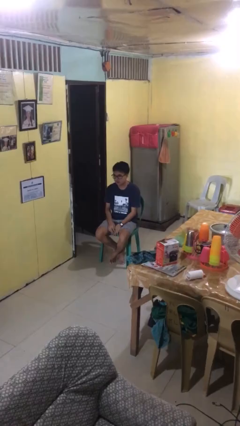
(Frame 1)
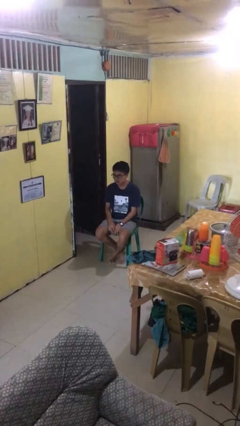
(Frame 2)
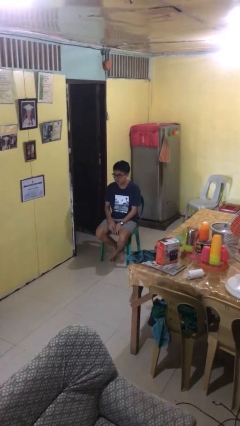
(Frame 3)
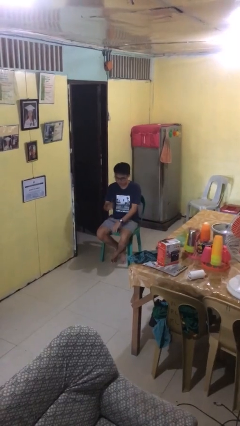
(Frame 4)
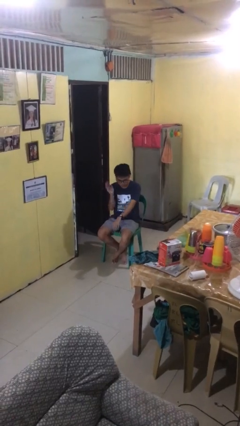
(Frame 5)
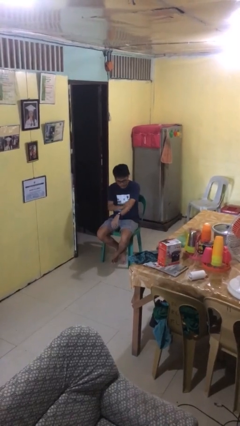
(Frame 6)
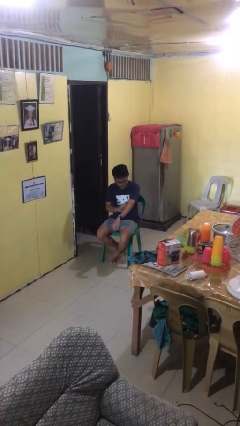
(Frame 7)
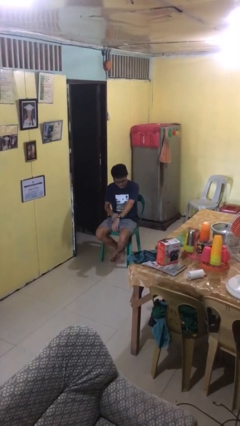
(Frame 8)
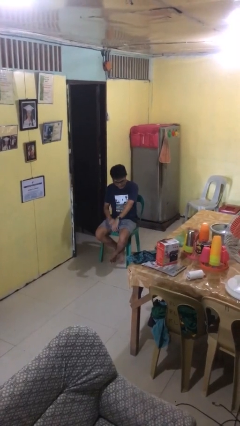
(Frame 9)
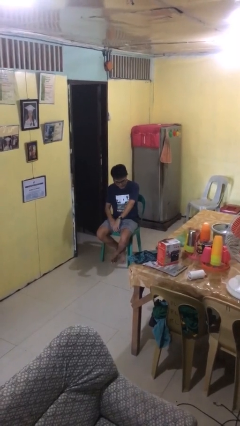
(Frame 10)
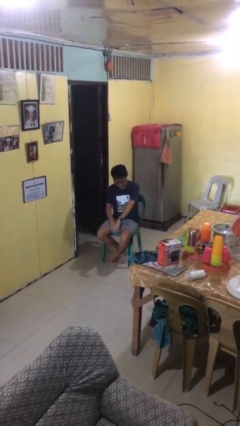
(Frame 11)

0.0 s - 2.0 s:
person swats bug

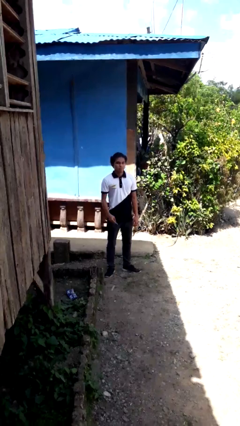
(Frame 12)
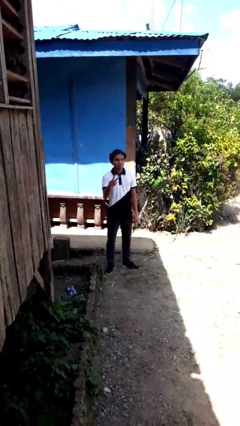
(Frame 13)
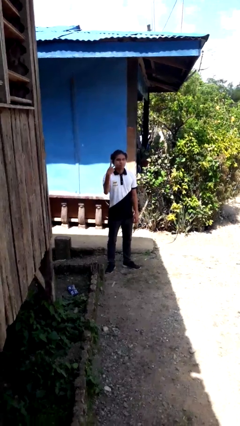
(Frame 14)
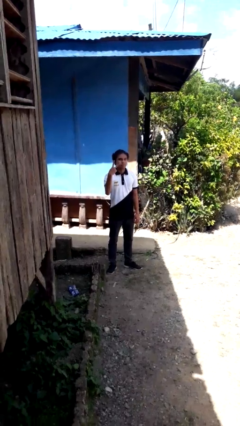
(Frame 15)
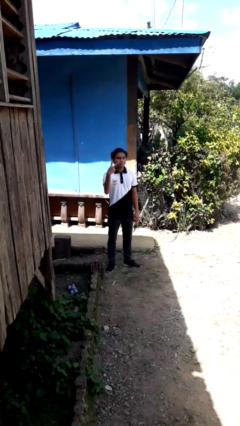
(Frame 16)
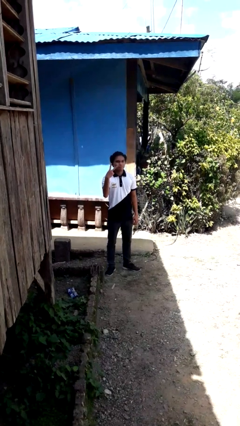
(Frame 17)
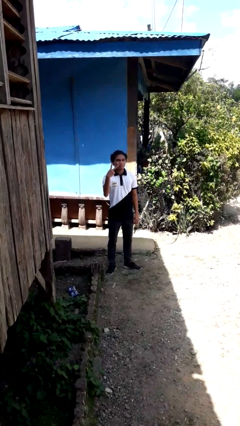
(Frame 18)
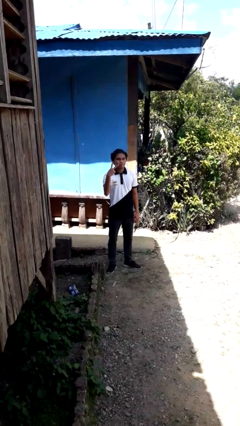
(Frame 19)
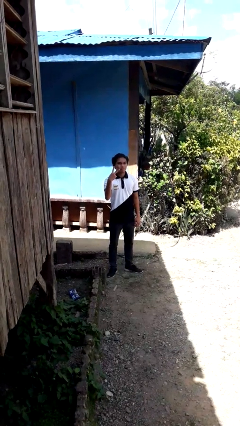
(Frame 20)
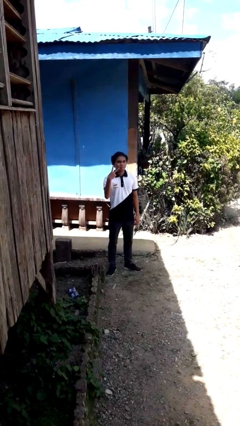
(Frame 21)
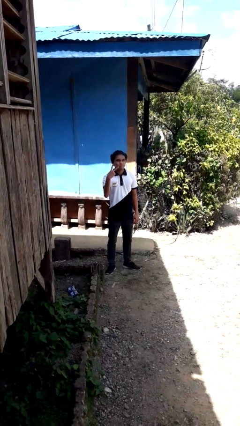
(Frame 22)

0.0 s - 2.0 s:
person gestures peace

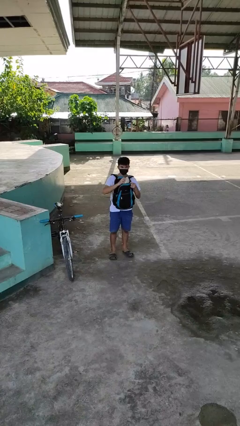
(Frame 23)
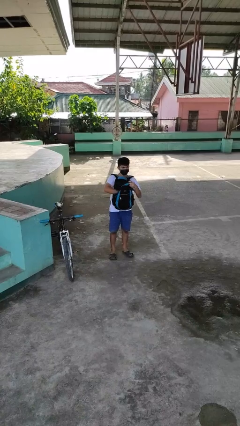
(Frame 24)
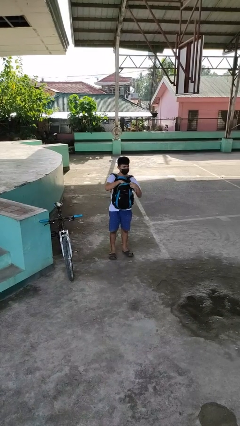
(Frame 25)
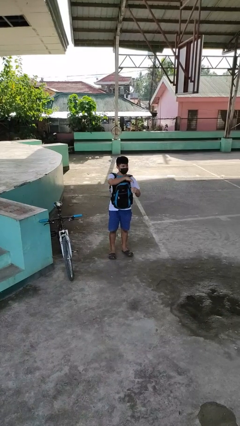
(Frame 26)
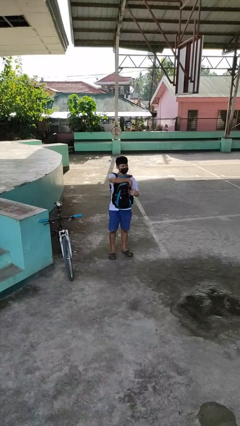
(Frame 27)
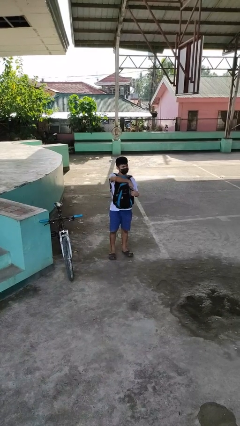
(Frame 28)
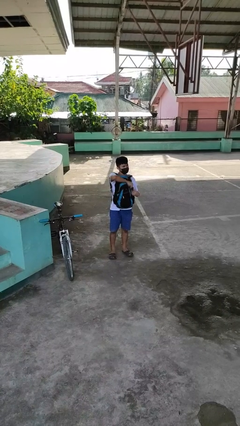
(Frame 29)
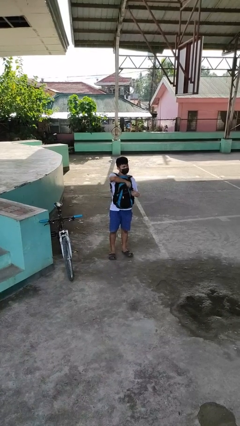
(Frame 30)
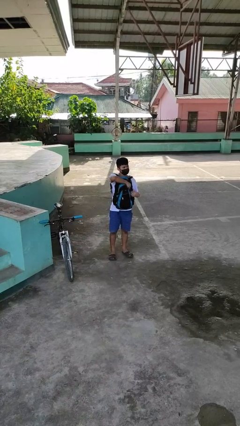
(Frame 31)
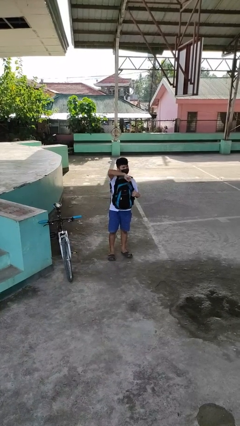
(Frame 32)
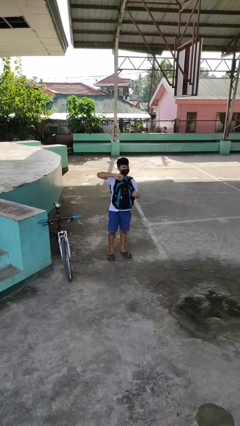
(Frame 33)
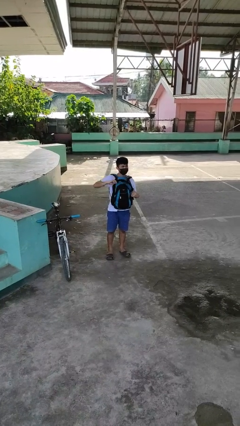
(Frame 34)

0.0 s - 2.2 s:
person puts object into backpack

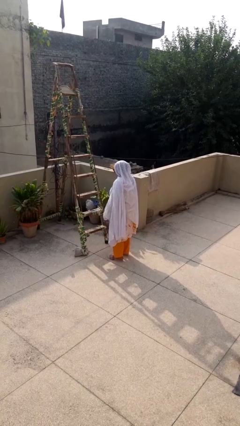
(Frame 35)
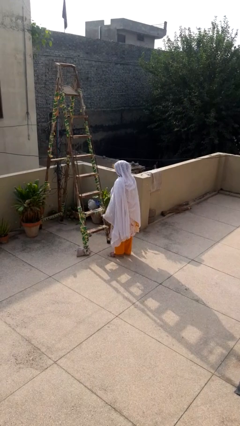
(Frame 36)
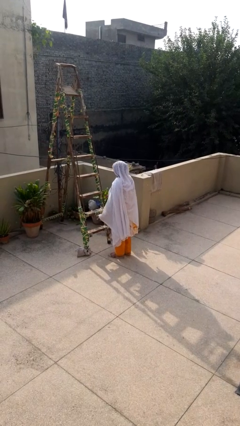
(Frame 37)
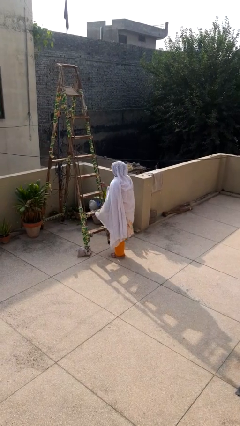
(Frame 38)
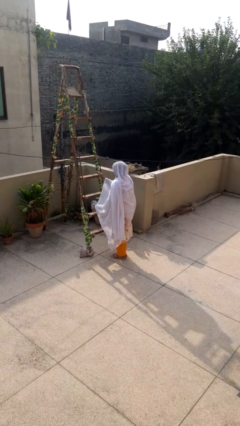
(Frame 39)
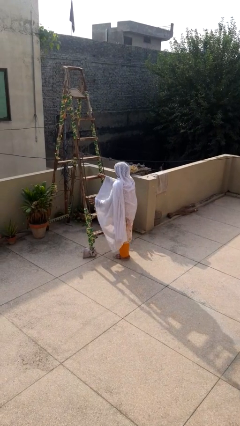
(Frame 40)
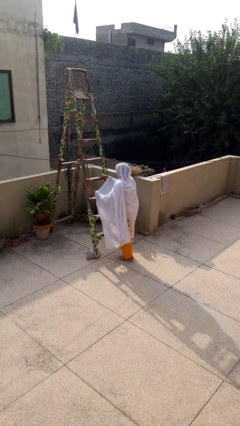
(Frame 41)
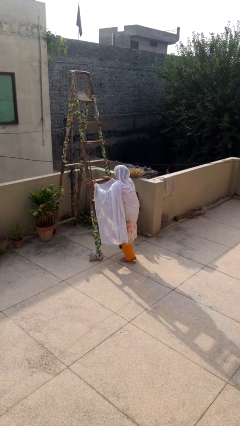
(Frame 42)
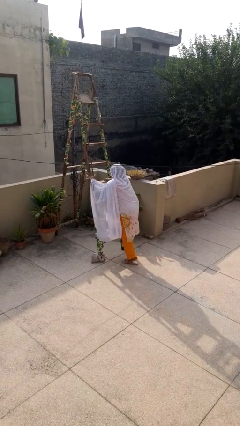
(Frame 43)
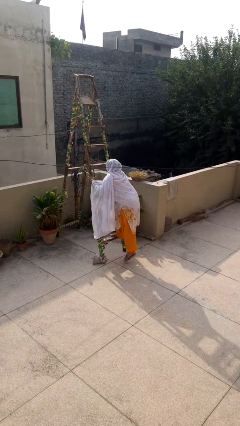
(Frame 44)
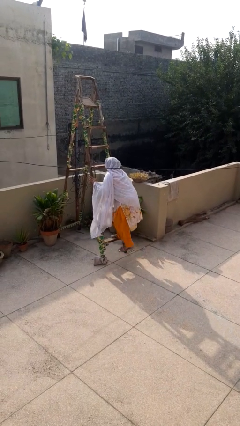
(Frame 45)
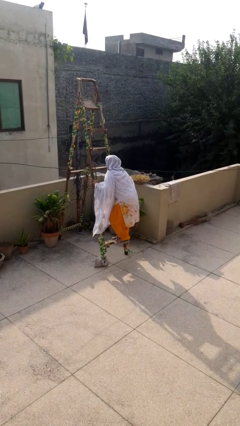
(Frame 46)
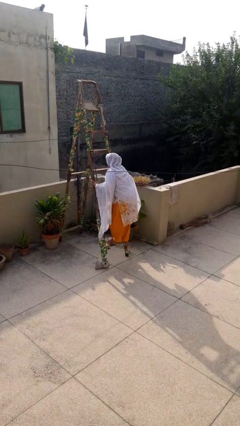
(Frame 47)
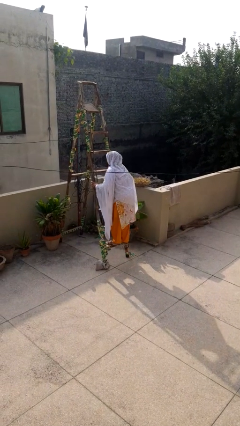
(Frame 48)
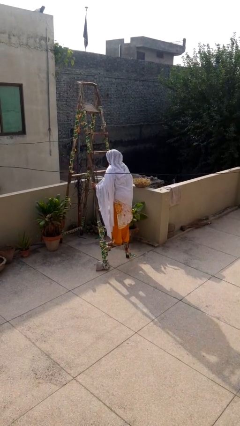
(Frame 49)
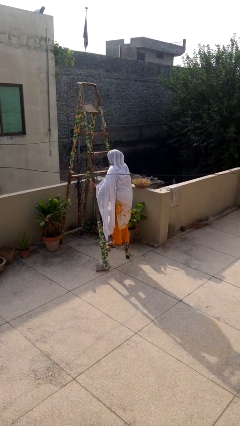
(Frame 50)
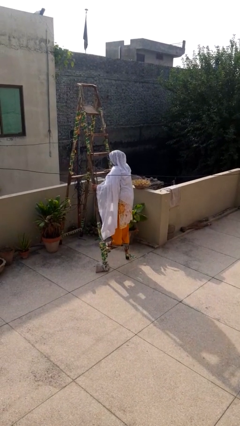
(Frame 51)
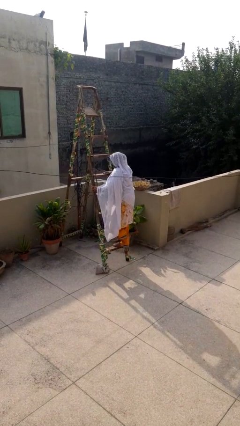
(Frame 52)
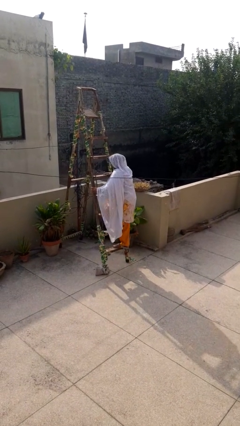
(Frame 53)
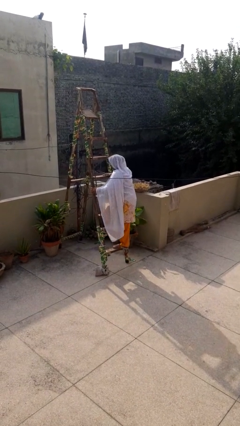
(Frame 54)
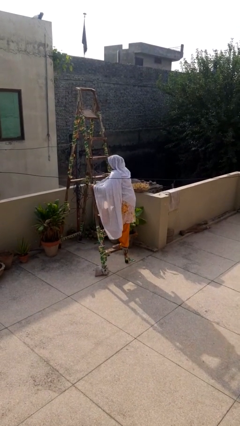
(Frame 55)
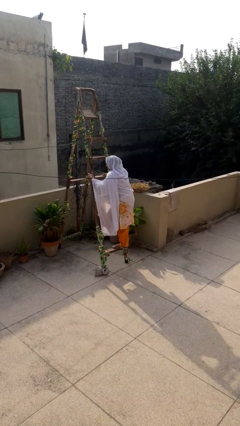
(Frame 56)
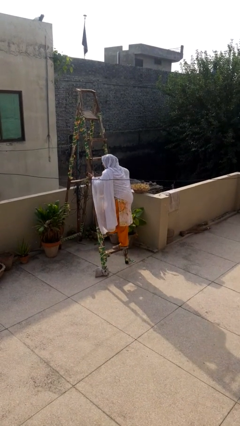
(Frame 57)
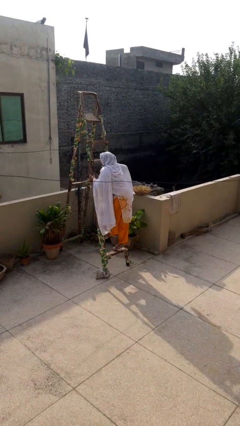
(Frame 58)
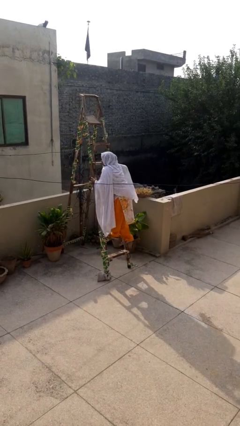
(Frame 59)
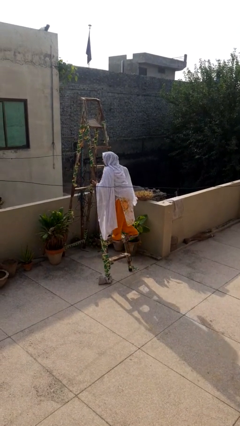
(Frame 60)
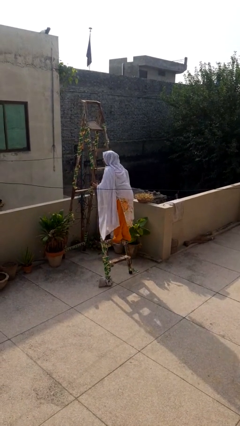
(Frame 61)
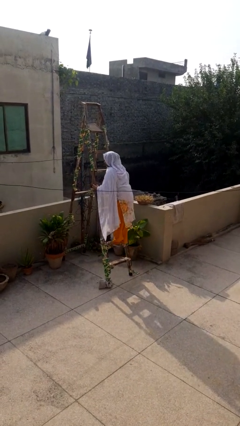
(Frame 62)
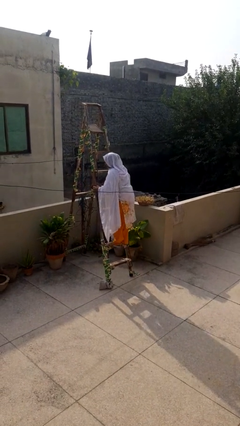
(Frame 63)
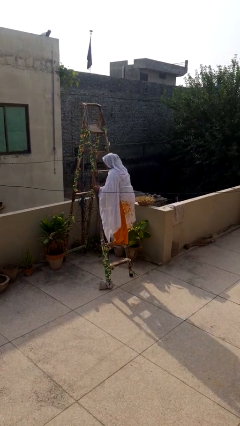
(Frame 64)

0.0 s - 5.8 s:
person climbs up ladder

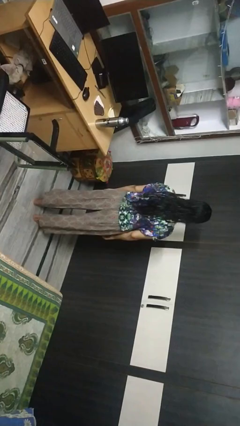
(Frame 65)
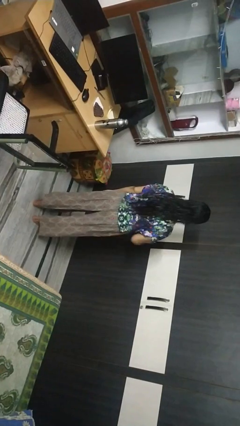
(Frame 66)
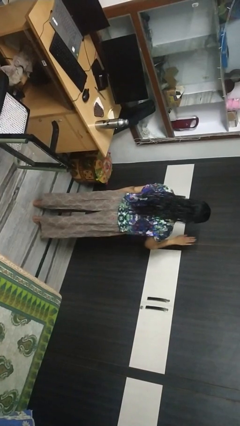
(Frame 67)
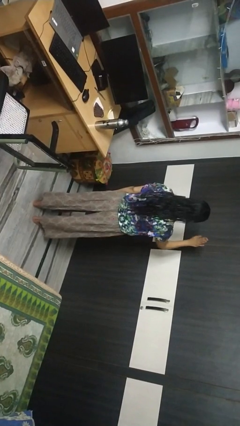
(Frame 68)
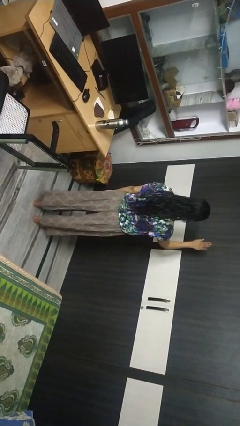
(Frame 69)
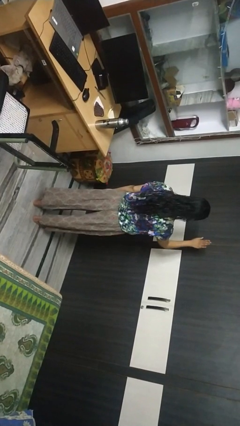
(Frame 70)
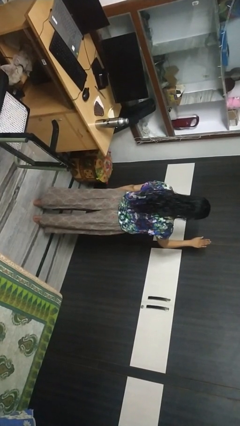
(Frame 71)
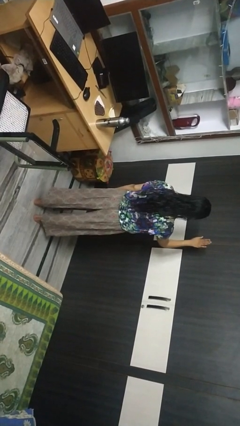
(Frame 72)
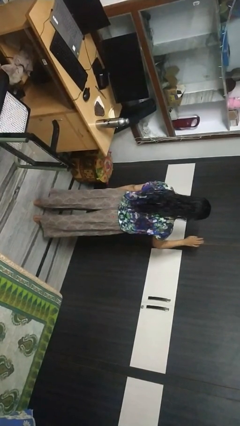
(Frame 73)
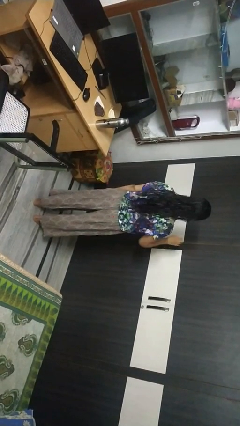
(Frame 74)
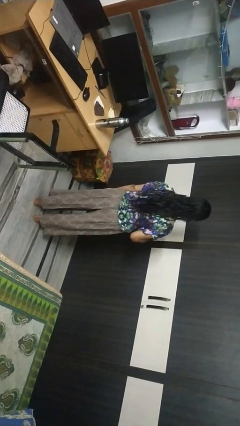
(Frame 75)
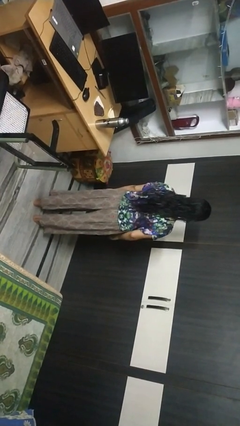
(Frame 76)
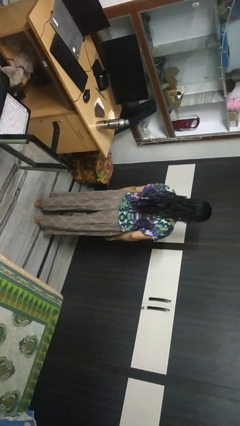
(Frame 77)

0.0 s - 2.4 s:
person gestures stop

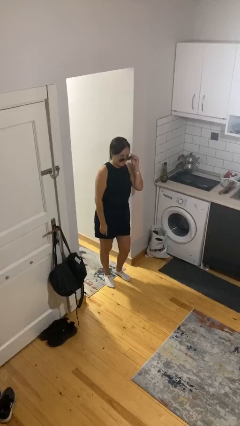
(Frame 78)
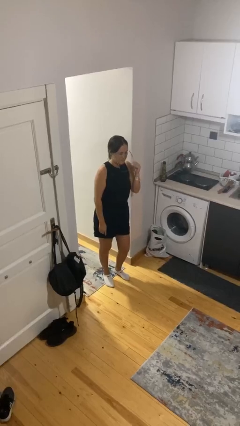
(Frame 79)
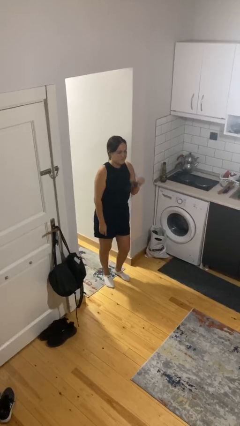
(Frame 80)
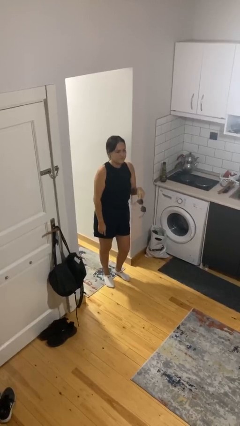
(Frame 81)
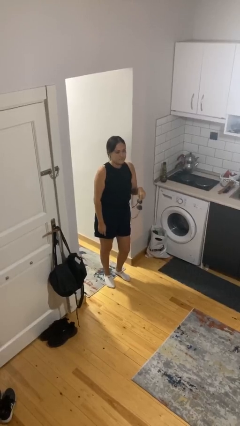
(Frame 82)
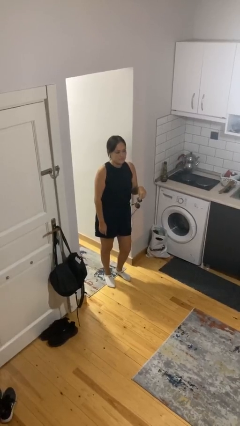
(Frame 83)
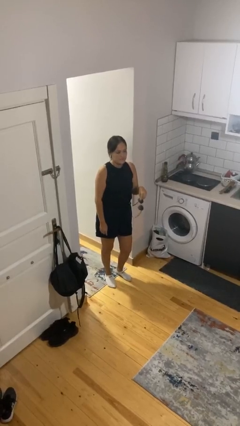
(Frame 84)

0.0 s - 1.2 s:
person takes off sunglasses

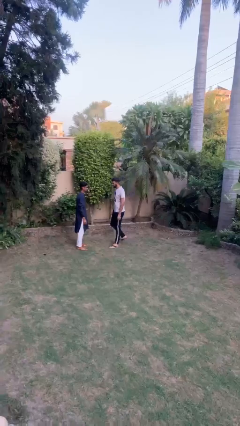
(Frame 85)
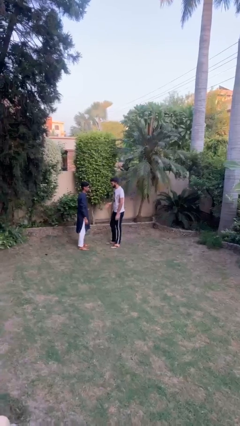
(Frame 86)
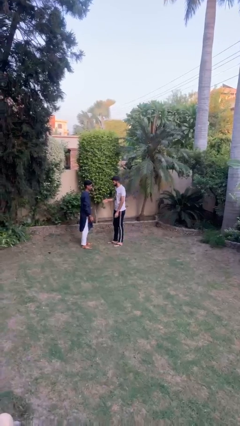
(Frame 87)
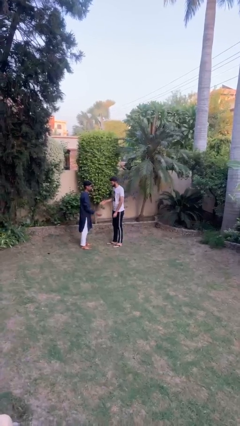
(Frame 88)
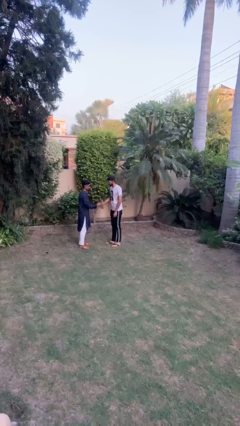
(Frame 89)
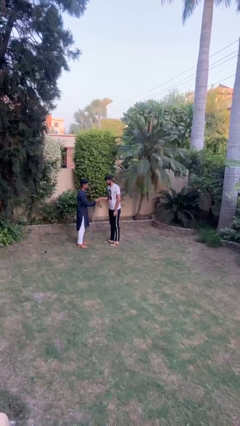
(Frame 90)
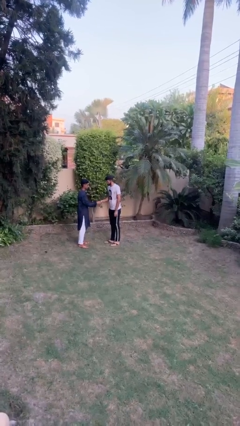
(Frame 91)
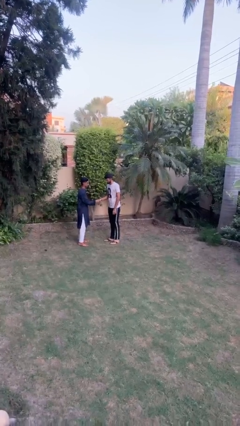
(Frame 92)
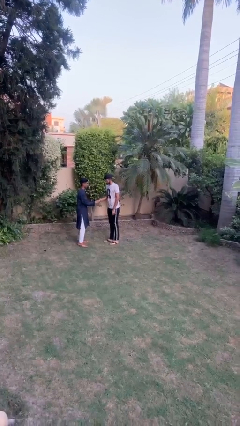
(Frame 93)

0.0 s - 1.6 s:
person shakes hand
